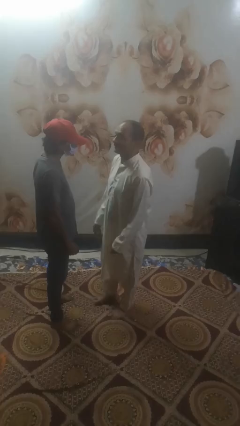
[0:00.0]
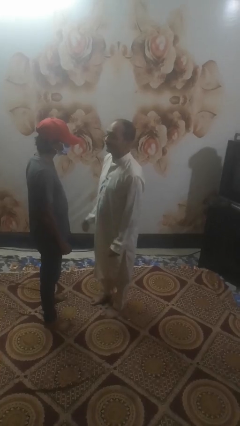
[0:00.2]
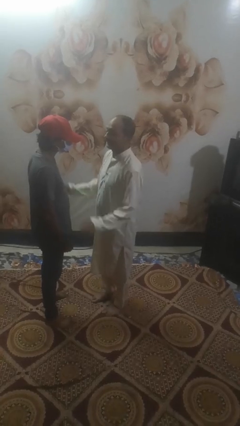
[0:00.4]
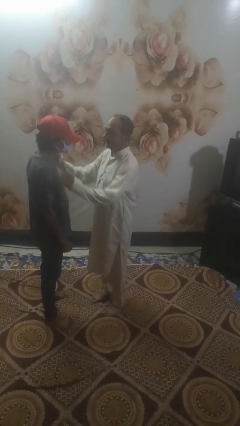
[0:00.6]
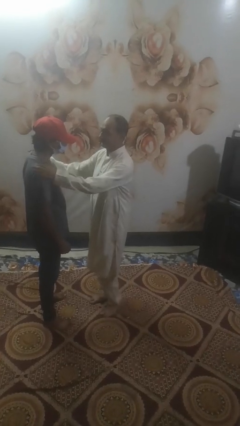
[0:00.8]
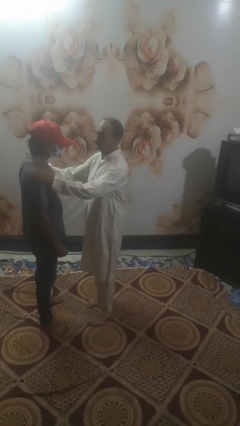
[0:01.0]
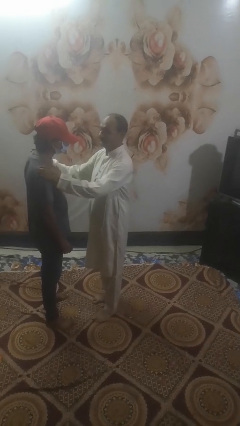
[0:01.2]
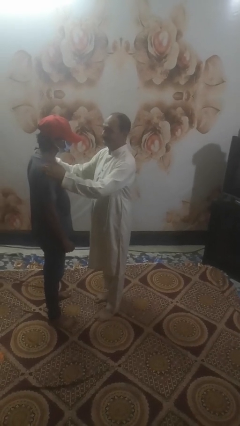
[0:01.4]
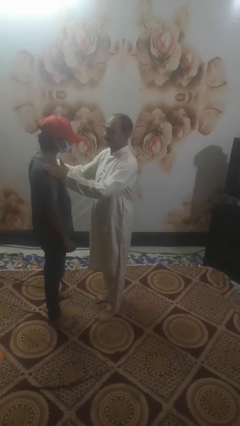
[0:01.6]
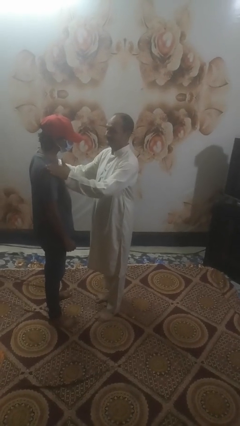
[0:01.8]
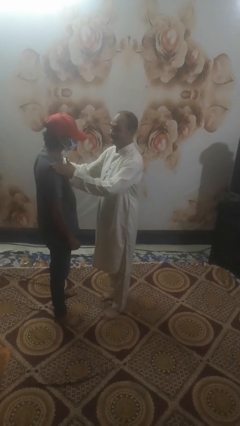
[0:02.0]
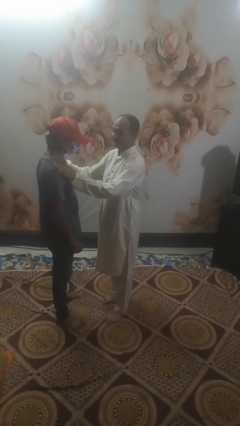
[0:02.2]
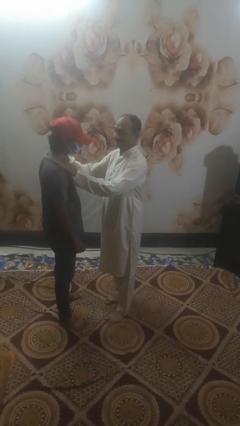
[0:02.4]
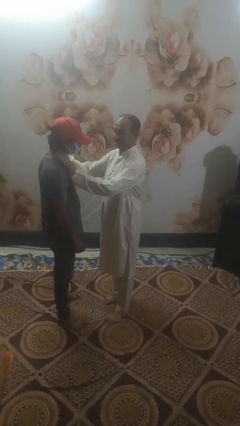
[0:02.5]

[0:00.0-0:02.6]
person pounds shoulders of person

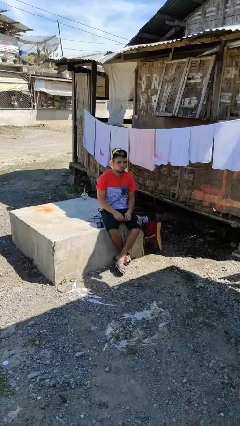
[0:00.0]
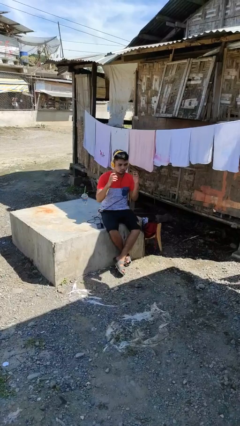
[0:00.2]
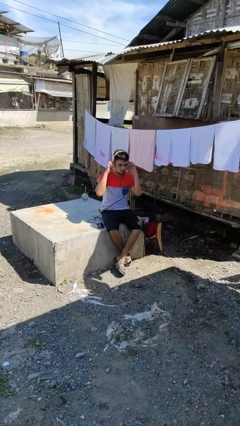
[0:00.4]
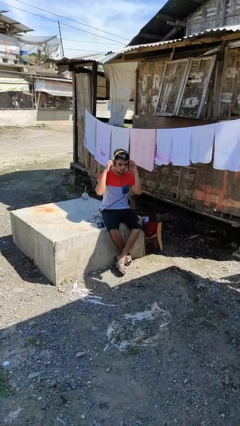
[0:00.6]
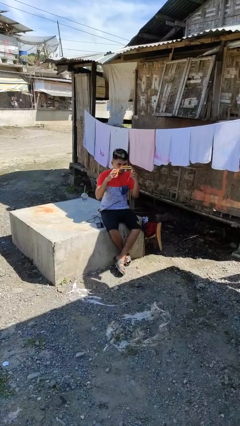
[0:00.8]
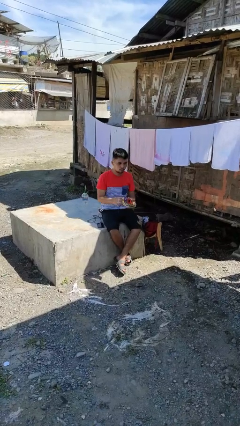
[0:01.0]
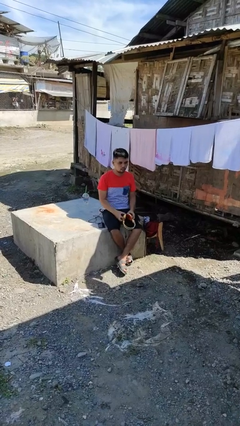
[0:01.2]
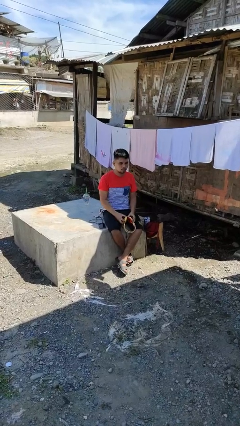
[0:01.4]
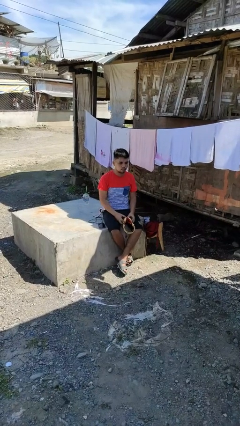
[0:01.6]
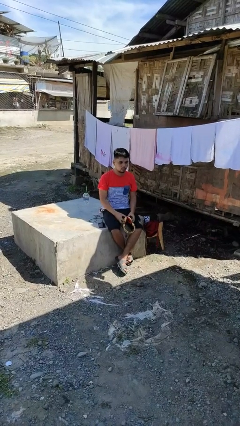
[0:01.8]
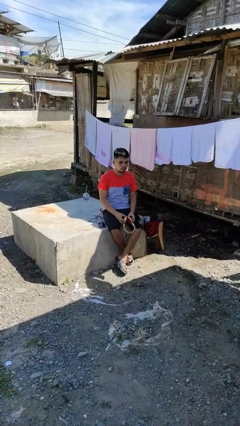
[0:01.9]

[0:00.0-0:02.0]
person takes off headphones

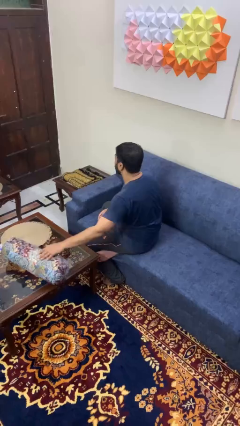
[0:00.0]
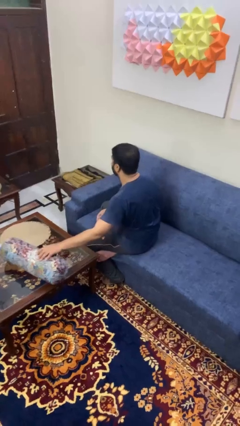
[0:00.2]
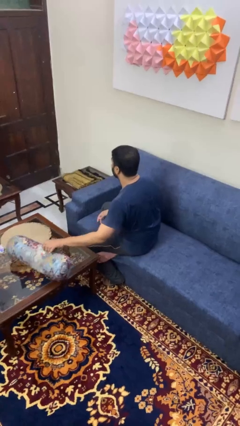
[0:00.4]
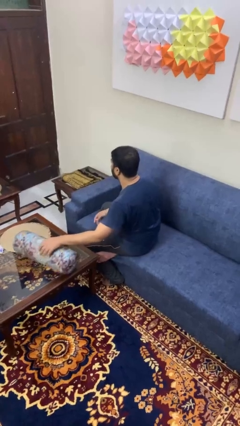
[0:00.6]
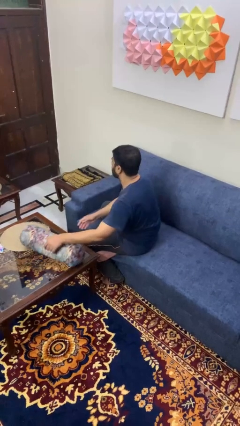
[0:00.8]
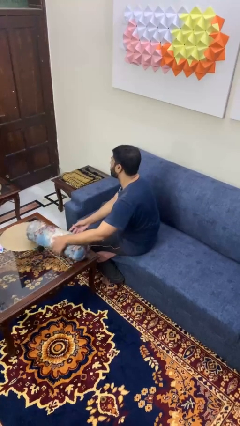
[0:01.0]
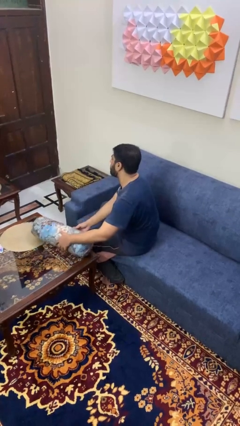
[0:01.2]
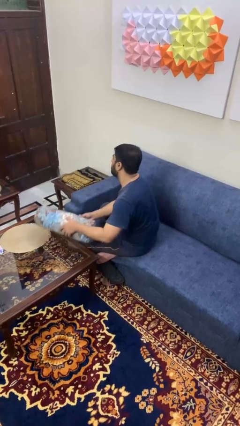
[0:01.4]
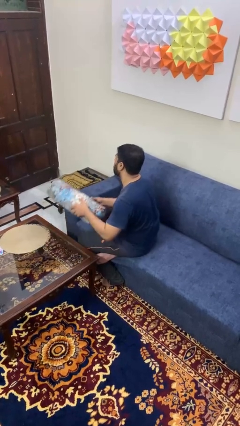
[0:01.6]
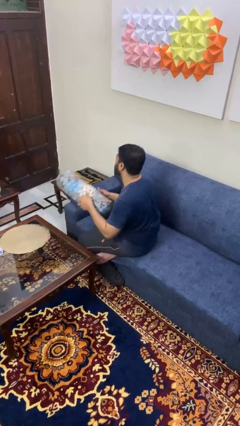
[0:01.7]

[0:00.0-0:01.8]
person picks up object from table

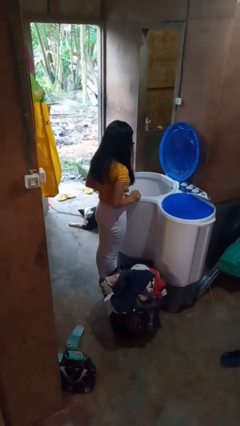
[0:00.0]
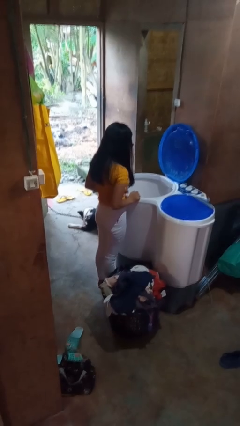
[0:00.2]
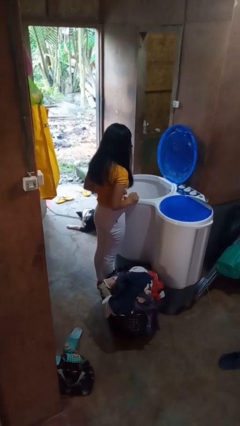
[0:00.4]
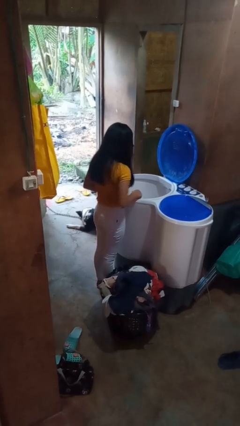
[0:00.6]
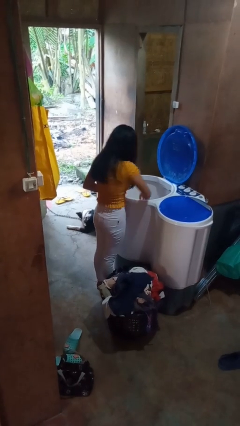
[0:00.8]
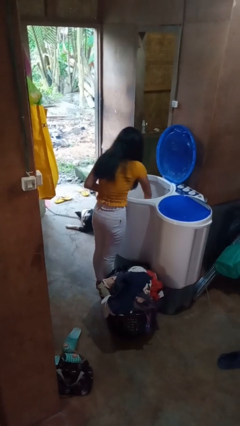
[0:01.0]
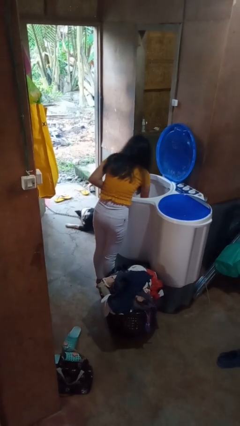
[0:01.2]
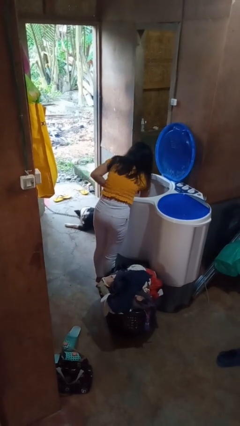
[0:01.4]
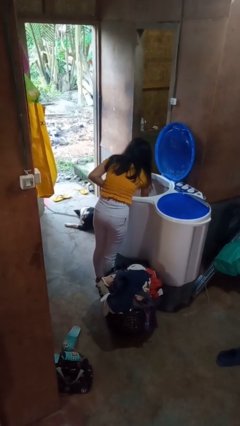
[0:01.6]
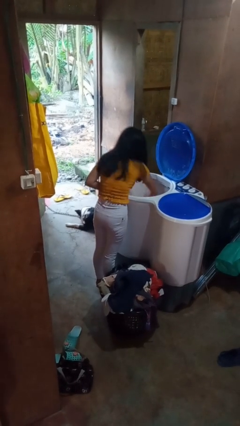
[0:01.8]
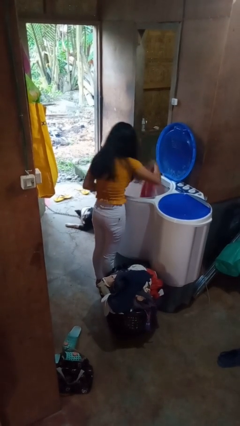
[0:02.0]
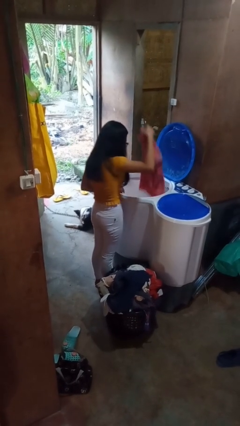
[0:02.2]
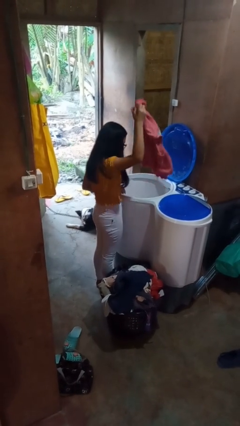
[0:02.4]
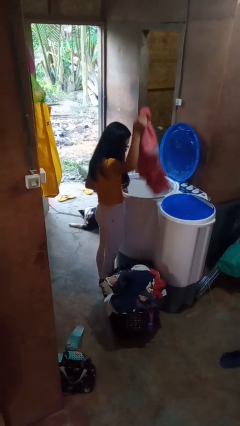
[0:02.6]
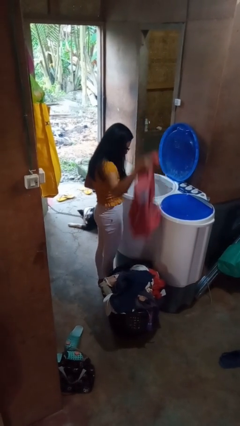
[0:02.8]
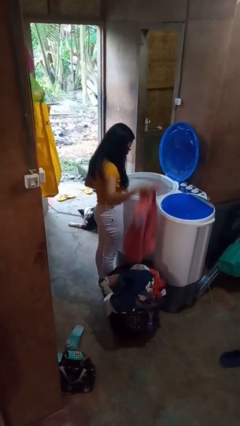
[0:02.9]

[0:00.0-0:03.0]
person unloads clotheswasher

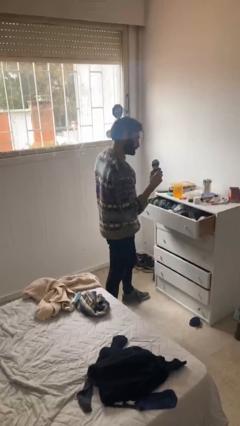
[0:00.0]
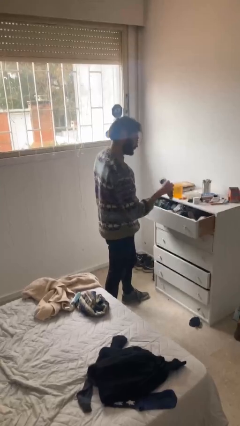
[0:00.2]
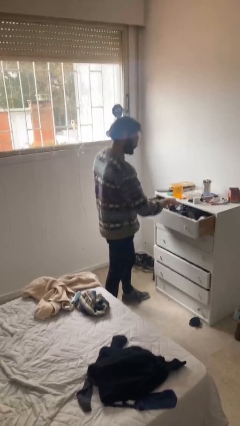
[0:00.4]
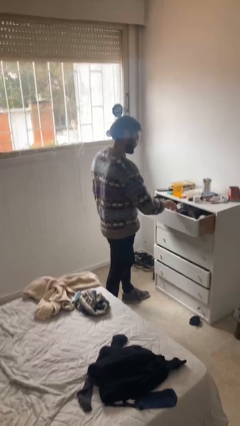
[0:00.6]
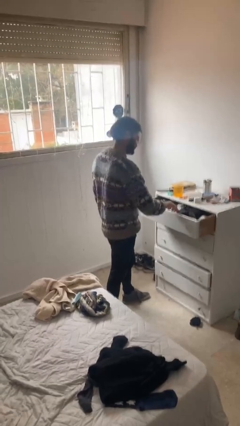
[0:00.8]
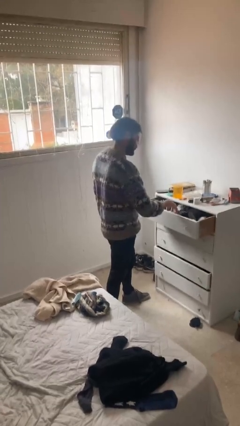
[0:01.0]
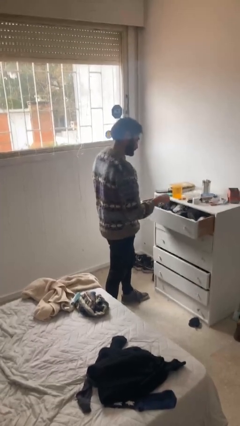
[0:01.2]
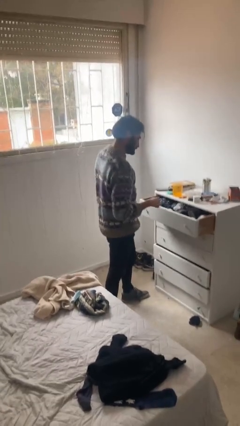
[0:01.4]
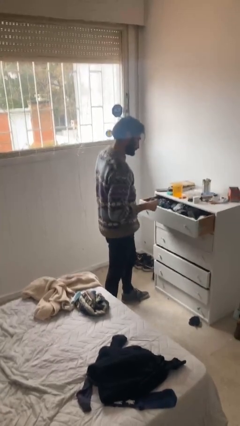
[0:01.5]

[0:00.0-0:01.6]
person puts clothes into dresser

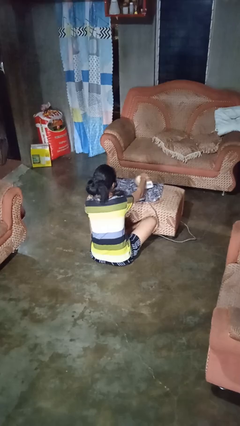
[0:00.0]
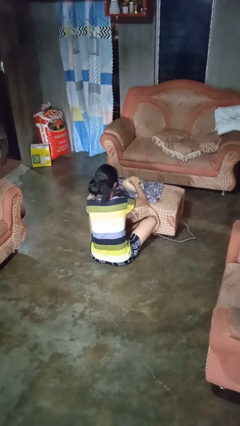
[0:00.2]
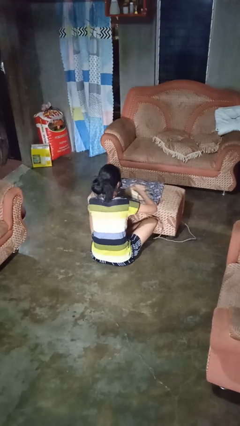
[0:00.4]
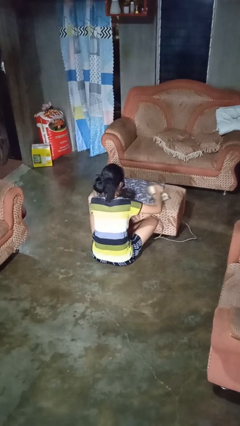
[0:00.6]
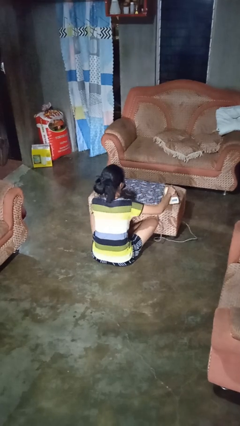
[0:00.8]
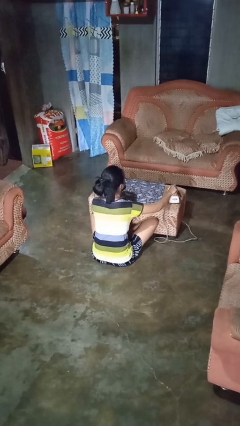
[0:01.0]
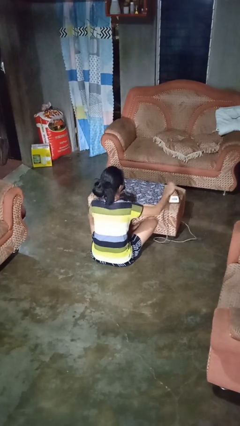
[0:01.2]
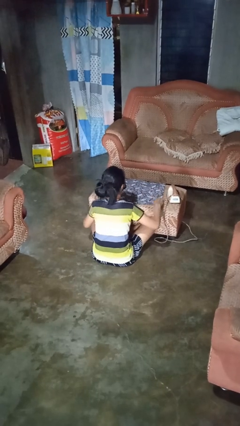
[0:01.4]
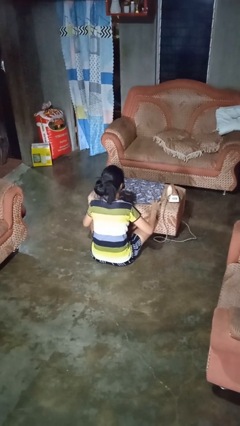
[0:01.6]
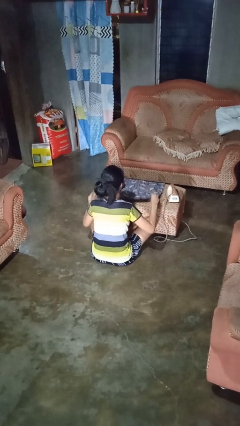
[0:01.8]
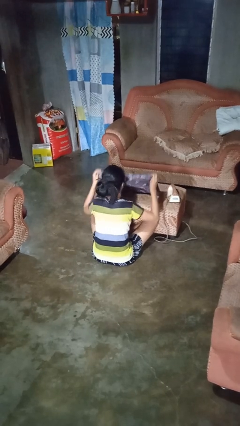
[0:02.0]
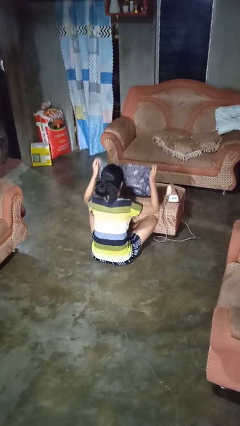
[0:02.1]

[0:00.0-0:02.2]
person irons clothes

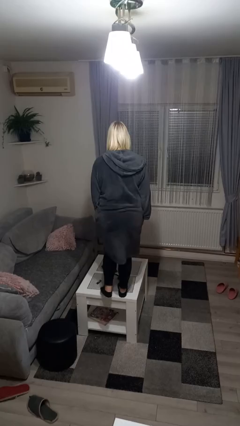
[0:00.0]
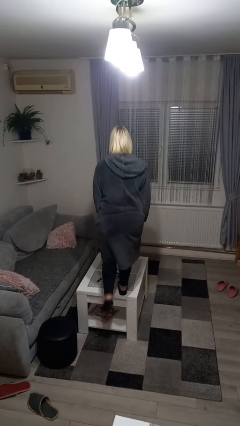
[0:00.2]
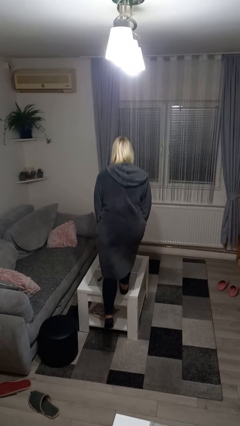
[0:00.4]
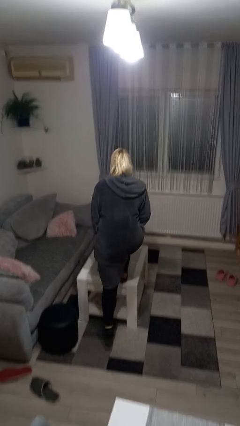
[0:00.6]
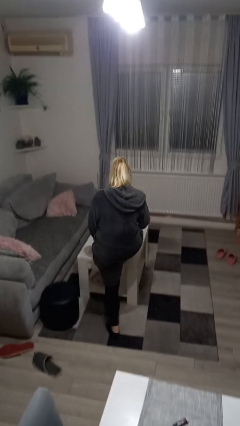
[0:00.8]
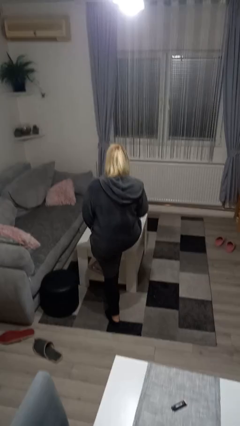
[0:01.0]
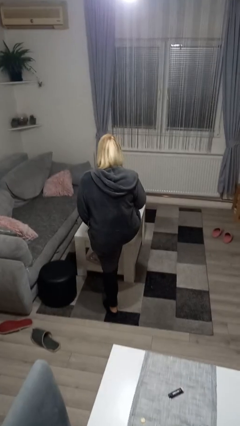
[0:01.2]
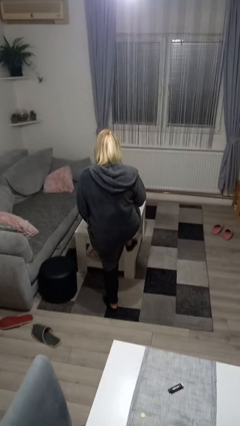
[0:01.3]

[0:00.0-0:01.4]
person climbs off table

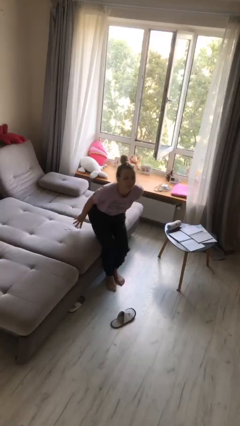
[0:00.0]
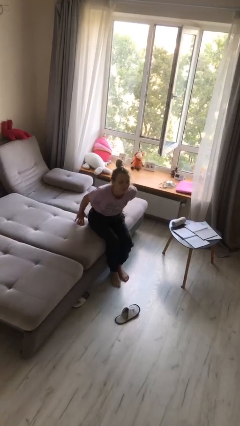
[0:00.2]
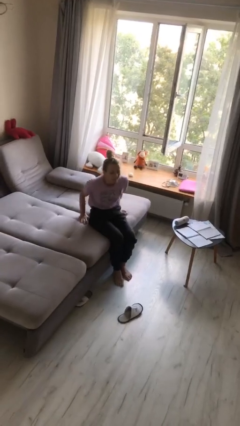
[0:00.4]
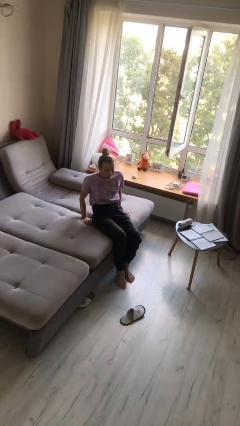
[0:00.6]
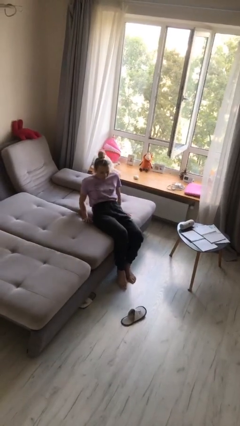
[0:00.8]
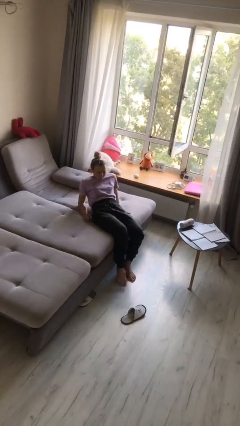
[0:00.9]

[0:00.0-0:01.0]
person lies down on bed

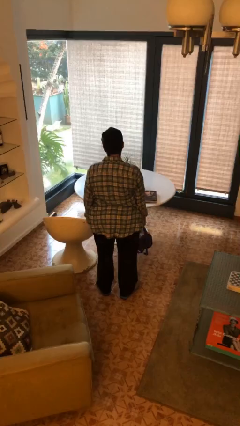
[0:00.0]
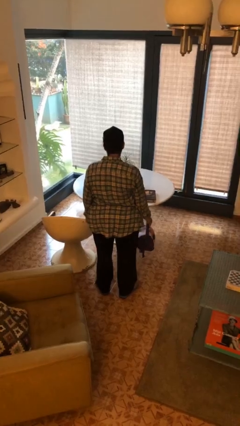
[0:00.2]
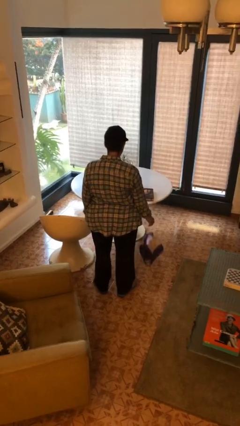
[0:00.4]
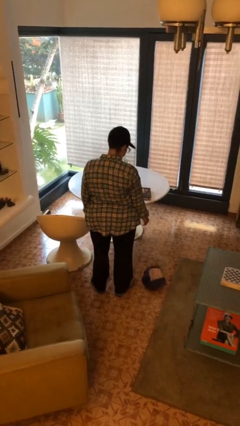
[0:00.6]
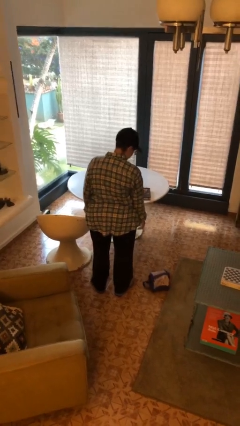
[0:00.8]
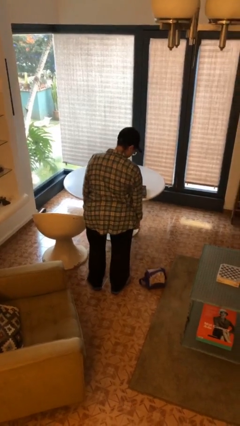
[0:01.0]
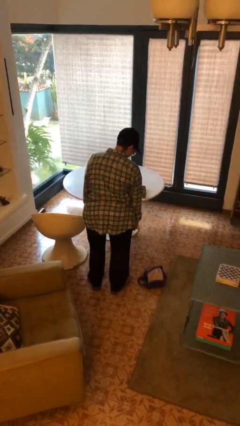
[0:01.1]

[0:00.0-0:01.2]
person drops object
